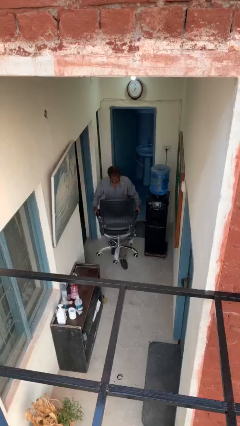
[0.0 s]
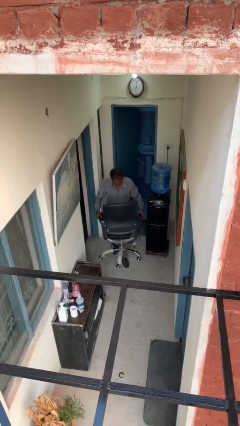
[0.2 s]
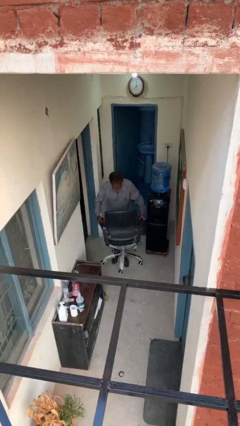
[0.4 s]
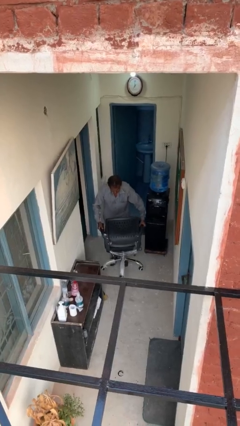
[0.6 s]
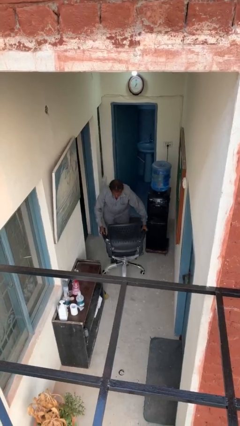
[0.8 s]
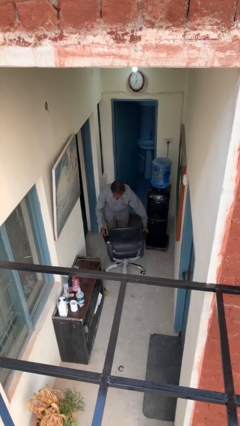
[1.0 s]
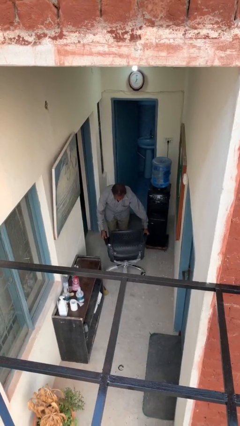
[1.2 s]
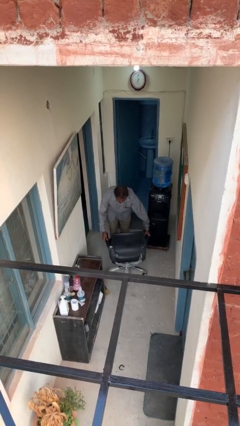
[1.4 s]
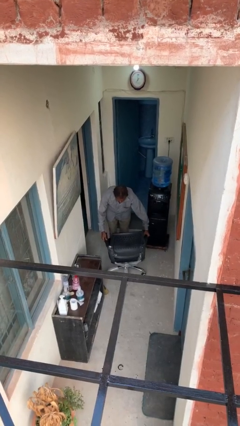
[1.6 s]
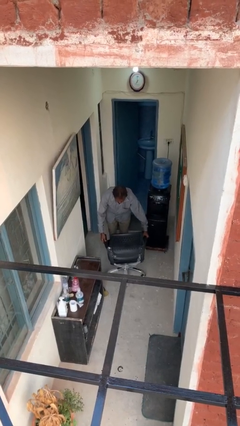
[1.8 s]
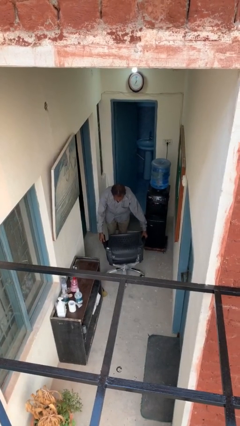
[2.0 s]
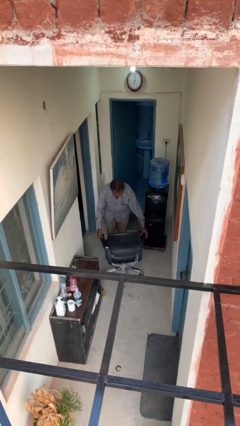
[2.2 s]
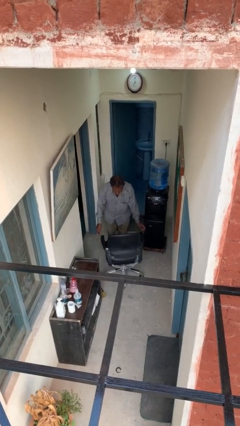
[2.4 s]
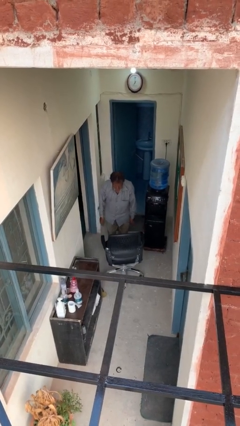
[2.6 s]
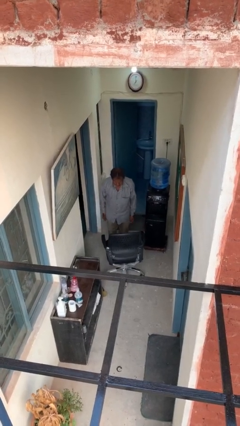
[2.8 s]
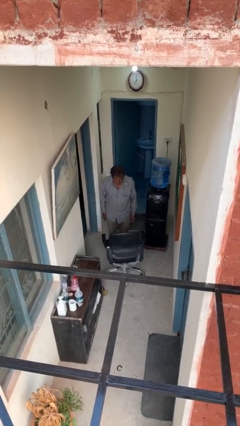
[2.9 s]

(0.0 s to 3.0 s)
person puts down object on floor

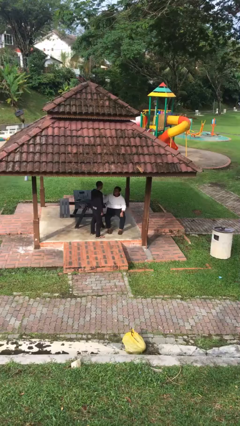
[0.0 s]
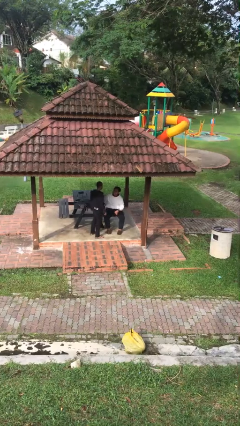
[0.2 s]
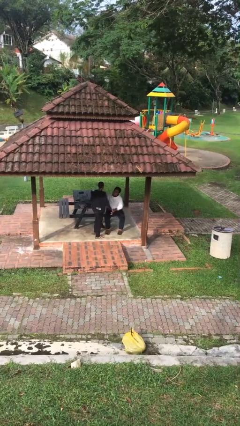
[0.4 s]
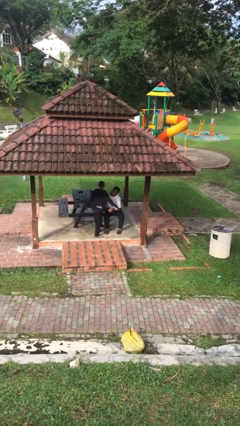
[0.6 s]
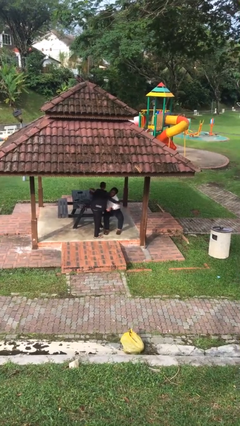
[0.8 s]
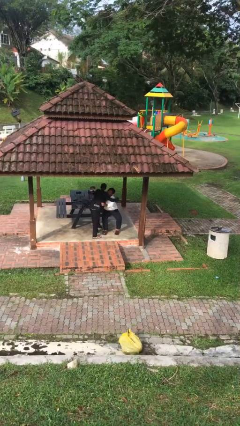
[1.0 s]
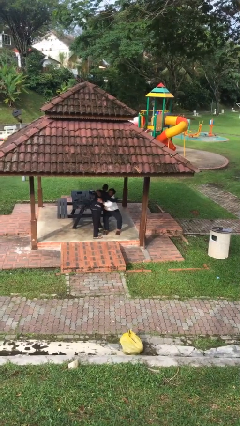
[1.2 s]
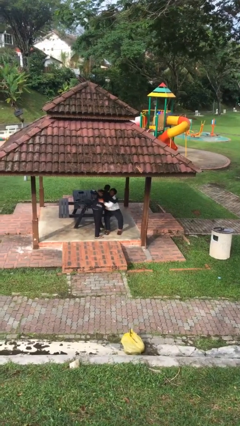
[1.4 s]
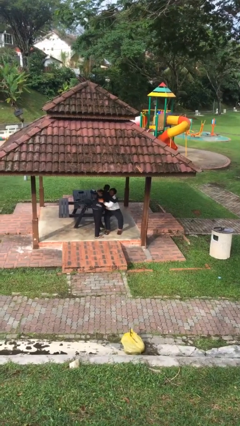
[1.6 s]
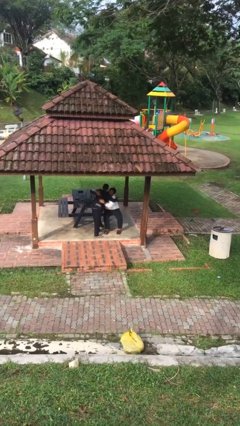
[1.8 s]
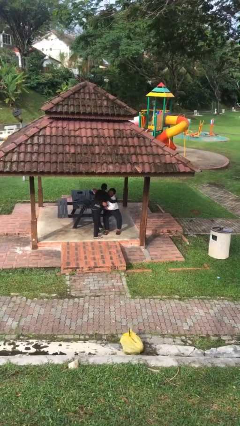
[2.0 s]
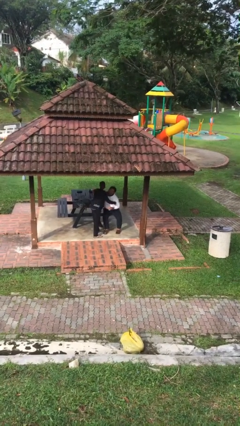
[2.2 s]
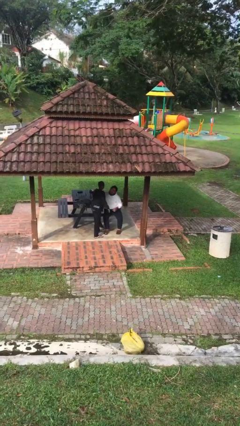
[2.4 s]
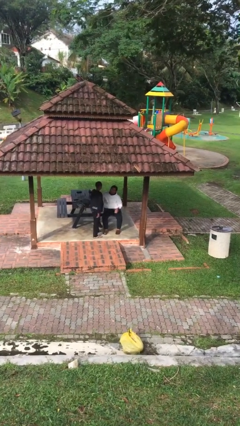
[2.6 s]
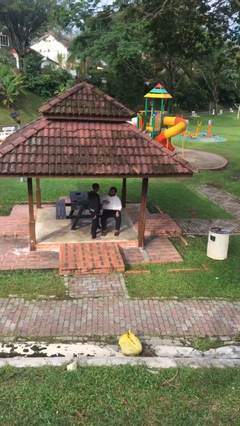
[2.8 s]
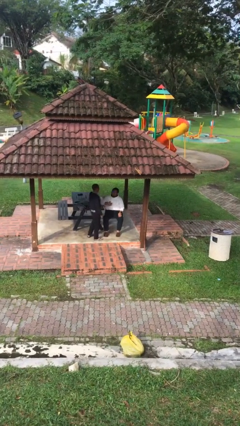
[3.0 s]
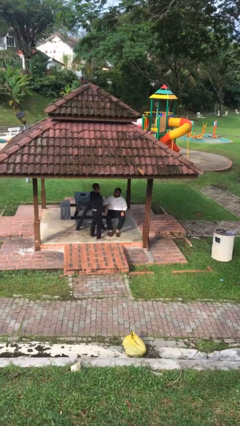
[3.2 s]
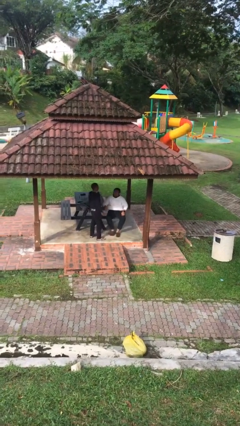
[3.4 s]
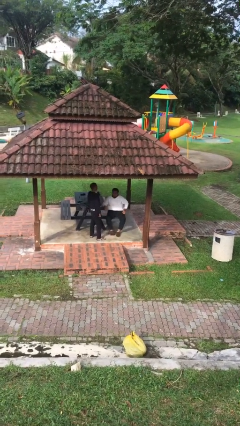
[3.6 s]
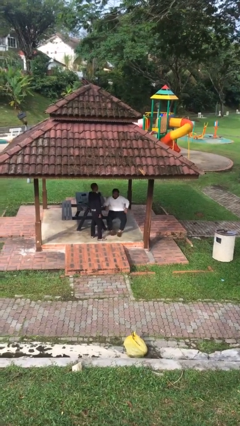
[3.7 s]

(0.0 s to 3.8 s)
person embraces person

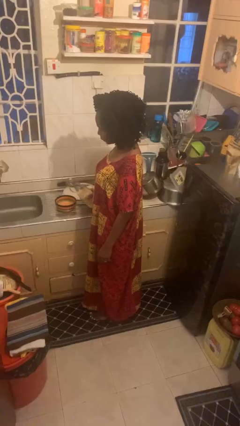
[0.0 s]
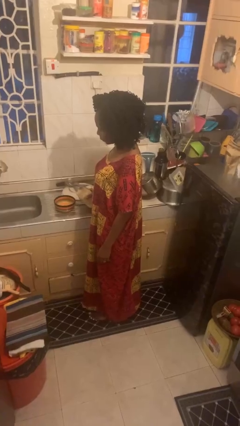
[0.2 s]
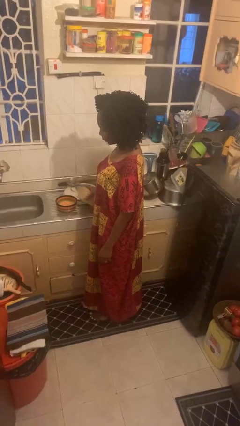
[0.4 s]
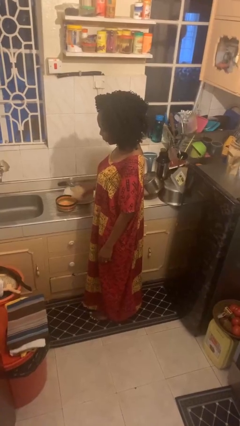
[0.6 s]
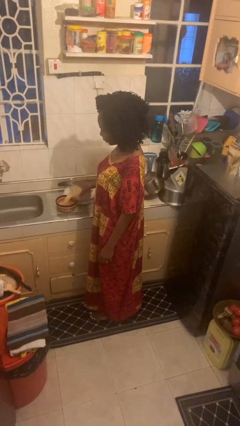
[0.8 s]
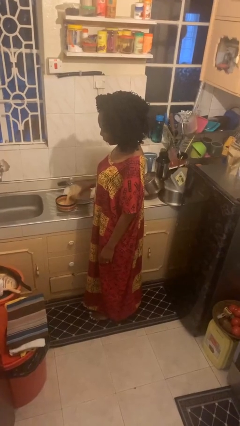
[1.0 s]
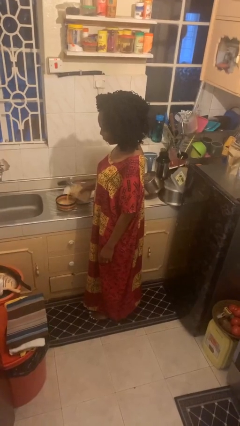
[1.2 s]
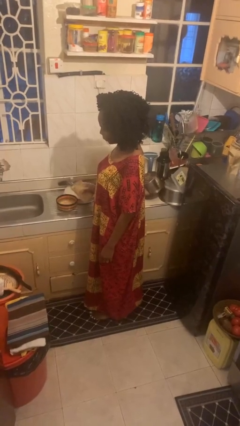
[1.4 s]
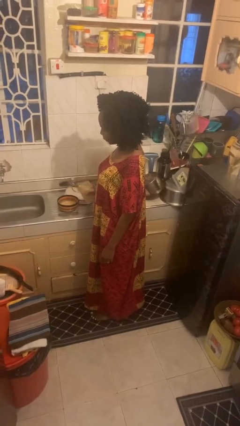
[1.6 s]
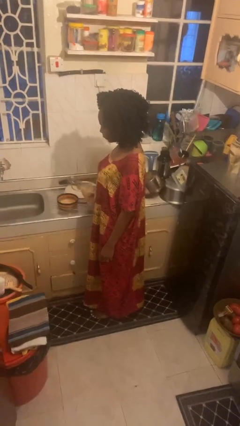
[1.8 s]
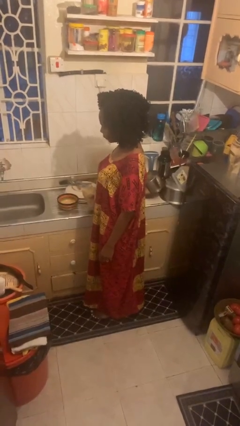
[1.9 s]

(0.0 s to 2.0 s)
person pours into bowl

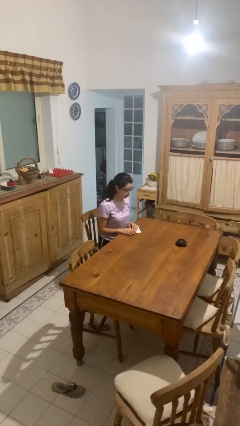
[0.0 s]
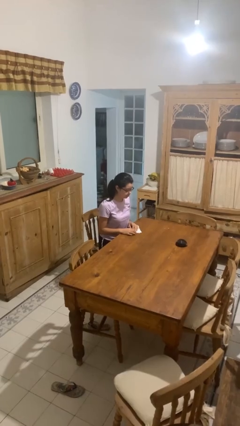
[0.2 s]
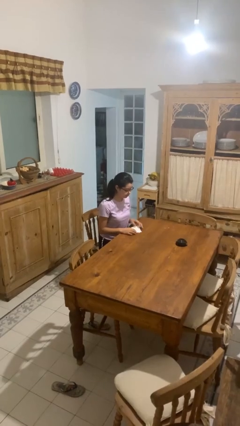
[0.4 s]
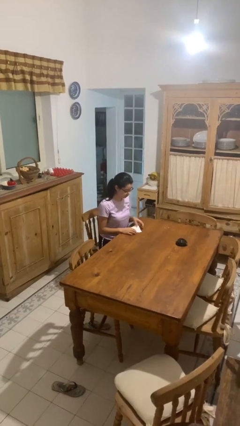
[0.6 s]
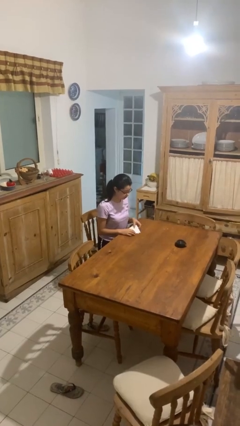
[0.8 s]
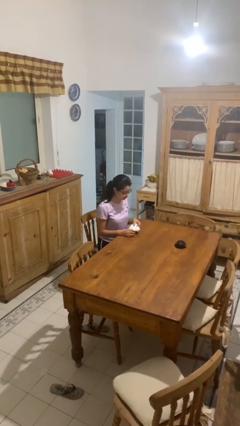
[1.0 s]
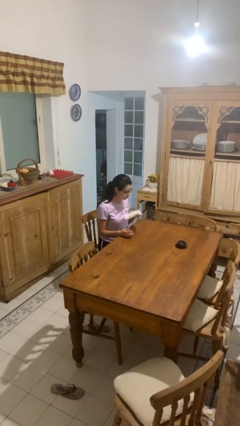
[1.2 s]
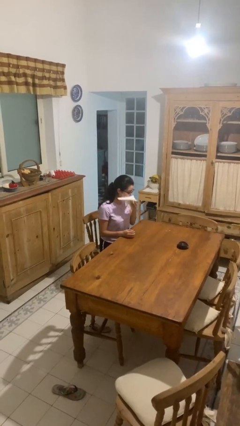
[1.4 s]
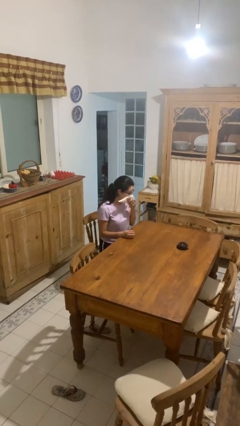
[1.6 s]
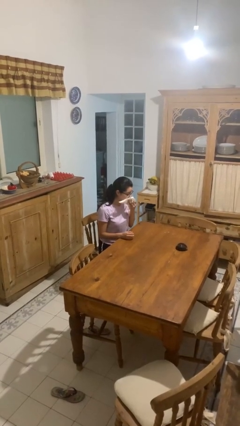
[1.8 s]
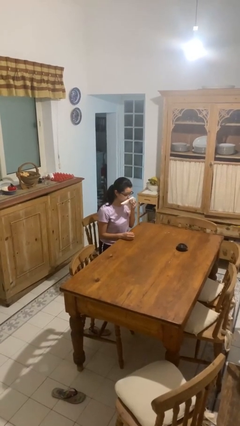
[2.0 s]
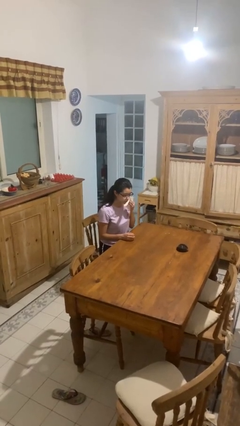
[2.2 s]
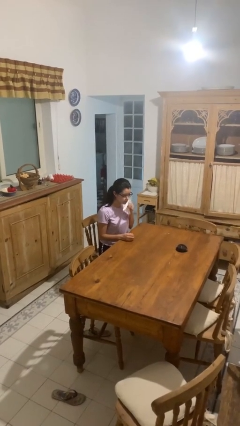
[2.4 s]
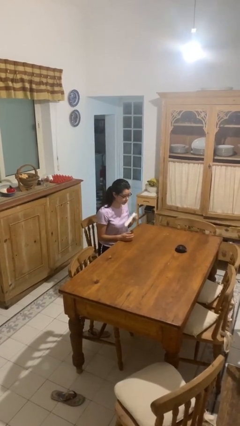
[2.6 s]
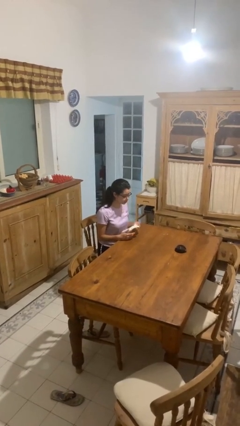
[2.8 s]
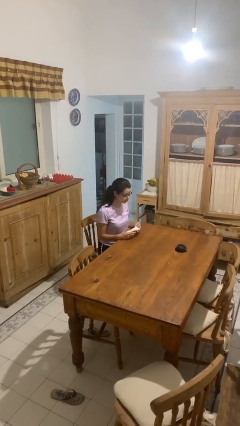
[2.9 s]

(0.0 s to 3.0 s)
person wipes mouth with napkin

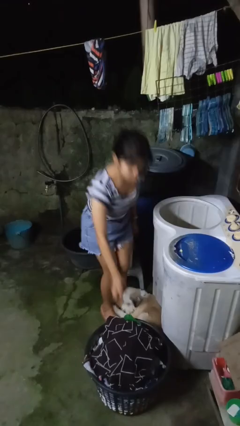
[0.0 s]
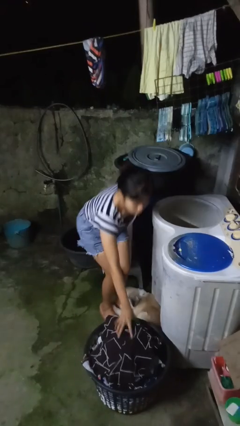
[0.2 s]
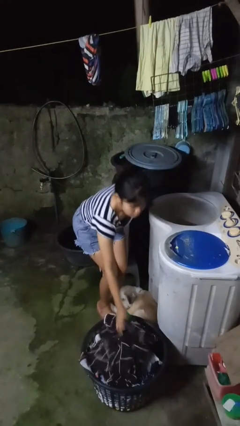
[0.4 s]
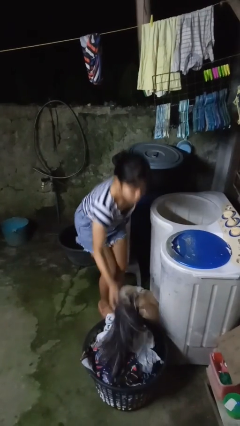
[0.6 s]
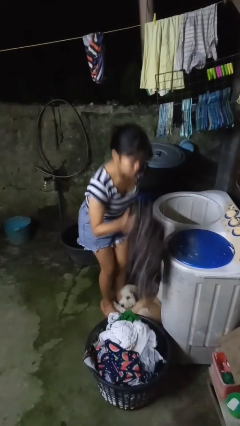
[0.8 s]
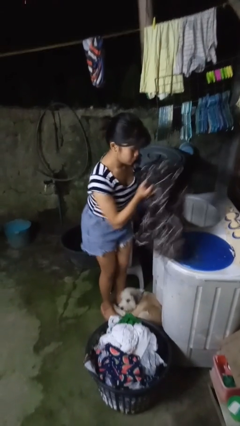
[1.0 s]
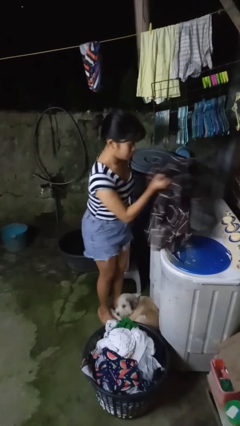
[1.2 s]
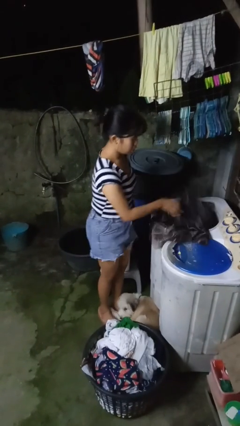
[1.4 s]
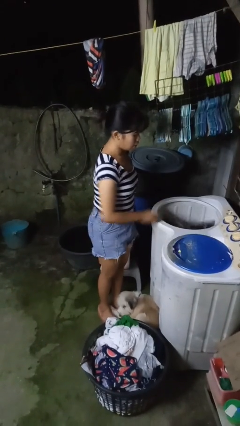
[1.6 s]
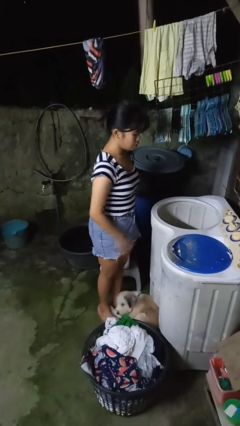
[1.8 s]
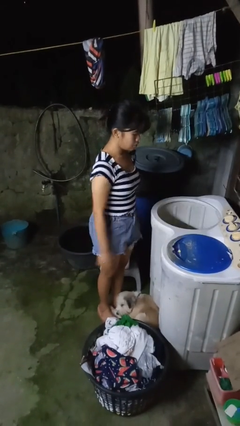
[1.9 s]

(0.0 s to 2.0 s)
person loads clotheswasher

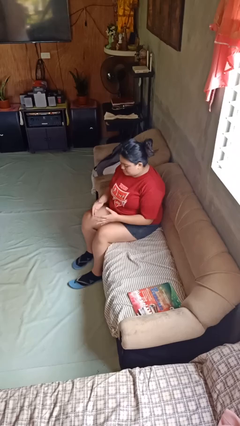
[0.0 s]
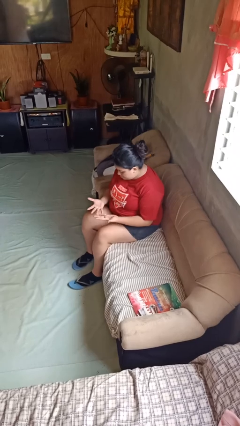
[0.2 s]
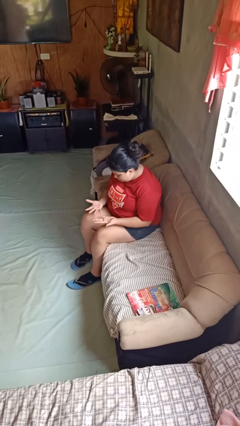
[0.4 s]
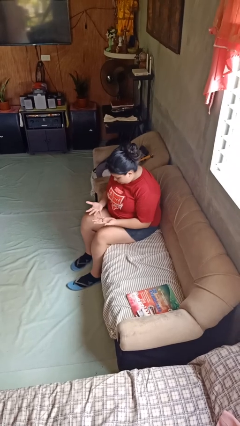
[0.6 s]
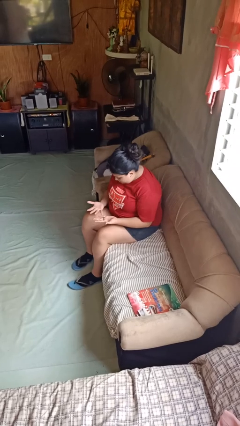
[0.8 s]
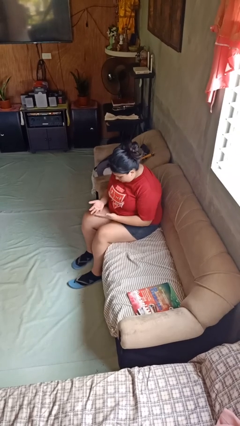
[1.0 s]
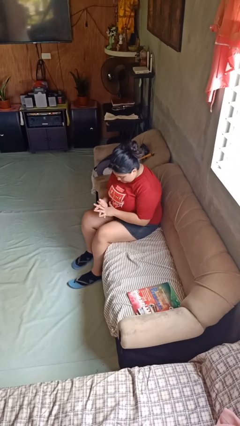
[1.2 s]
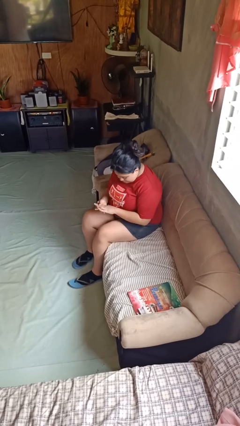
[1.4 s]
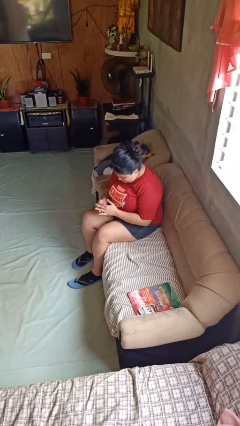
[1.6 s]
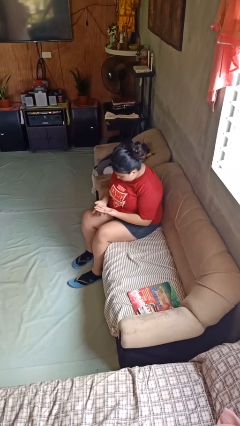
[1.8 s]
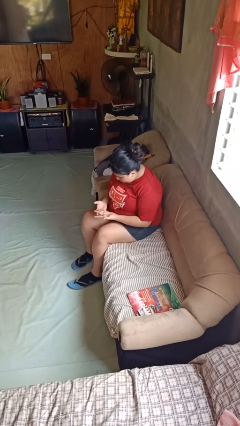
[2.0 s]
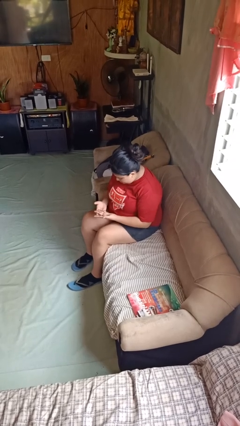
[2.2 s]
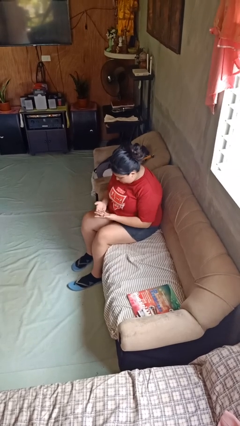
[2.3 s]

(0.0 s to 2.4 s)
person looks at hands in lap

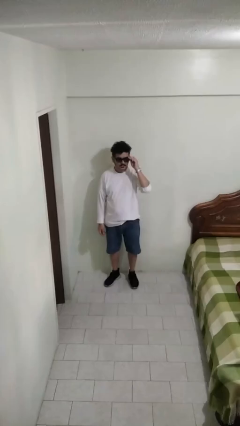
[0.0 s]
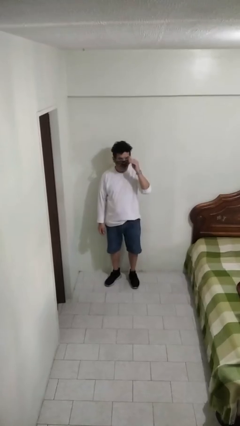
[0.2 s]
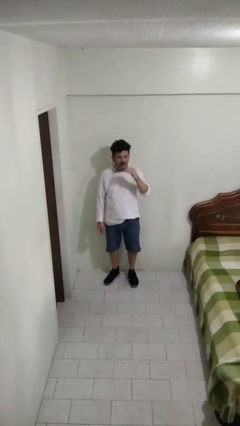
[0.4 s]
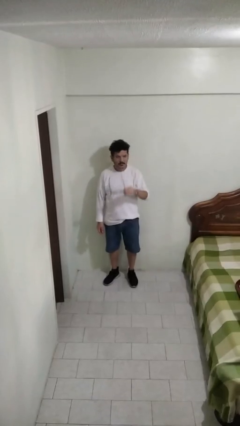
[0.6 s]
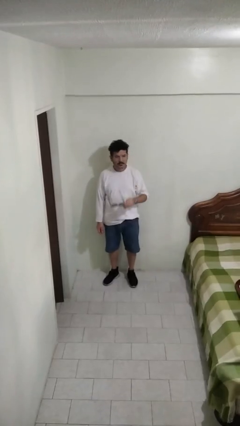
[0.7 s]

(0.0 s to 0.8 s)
person takes off sunglasses

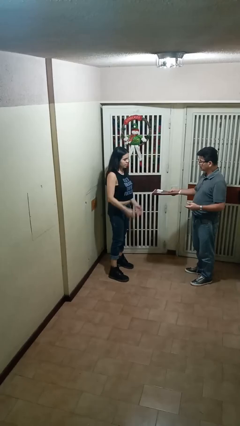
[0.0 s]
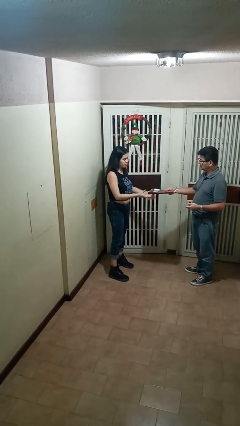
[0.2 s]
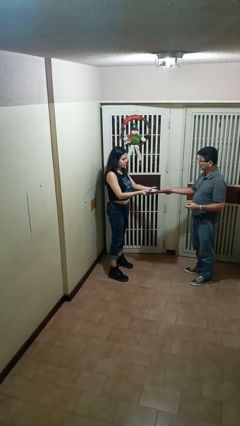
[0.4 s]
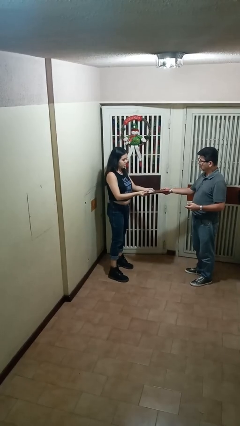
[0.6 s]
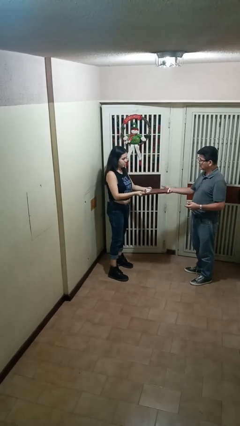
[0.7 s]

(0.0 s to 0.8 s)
person transfers object to person
